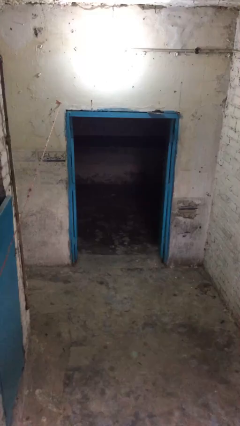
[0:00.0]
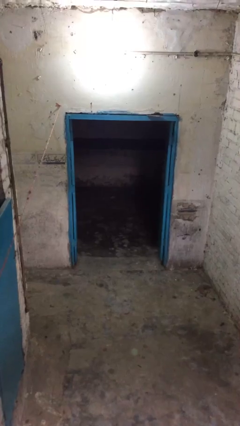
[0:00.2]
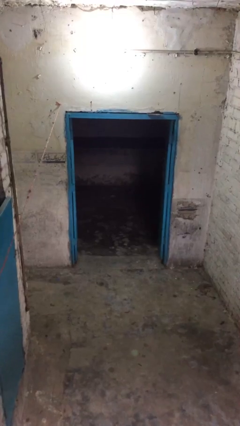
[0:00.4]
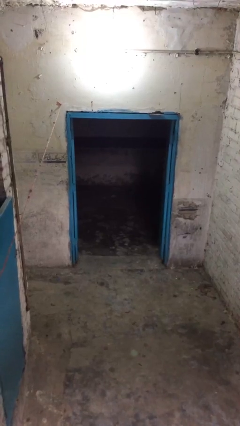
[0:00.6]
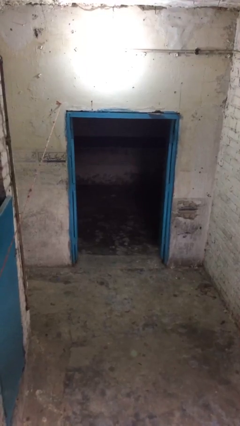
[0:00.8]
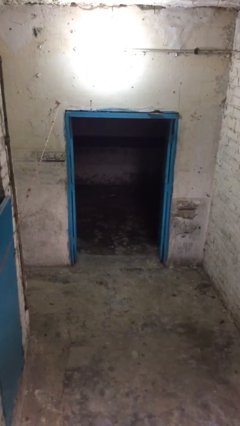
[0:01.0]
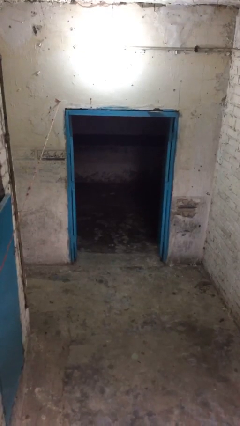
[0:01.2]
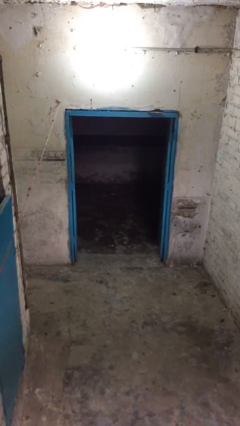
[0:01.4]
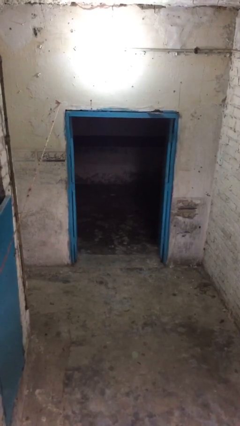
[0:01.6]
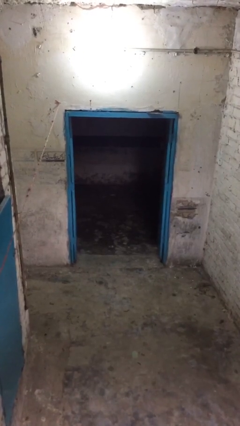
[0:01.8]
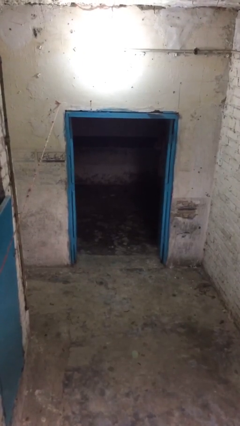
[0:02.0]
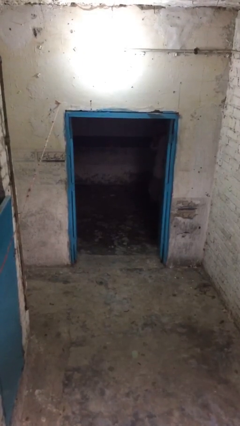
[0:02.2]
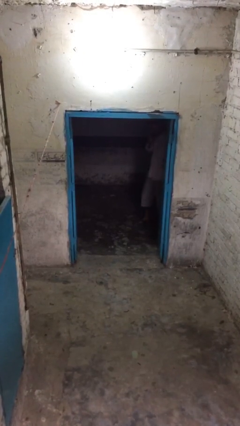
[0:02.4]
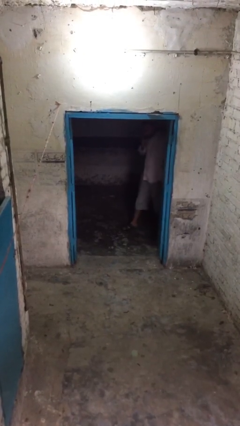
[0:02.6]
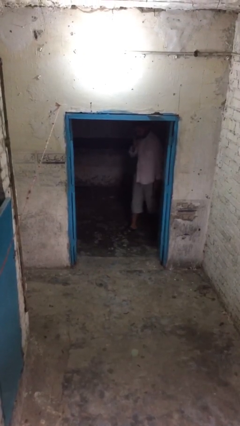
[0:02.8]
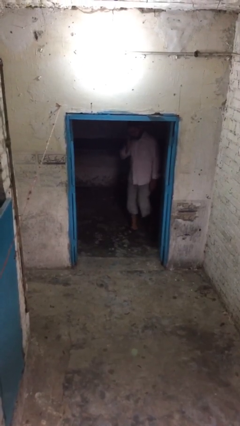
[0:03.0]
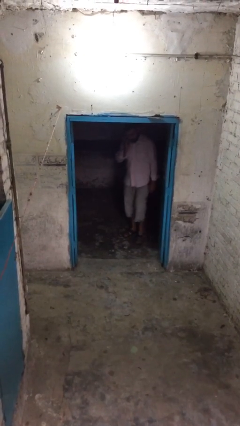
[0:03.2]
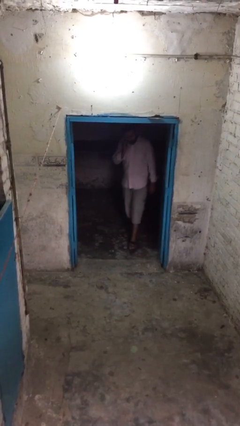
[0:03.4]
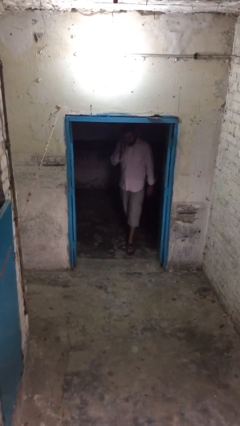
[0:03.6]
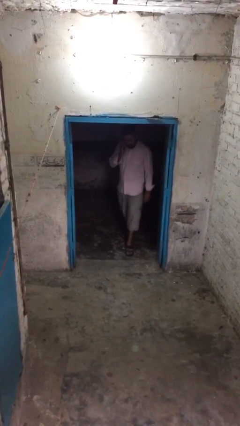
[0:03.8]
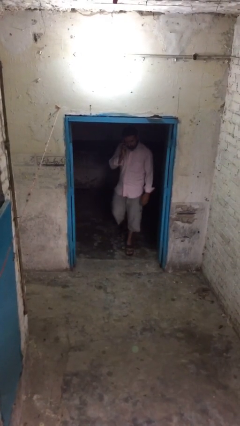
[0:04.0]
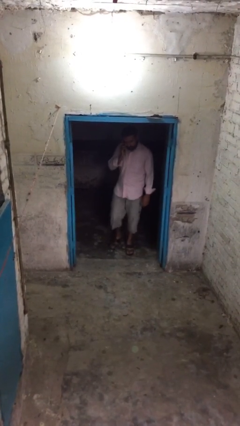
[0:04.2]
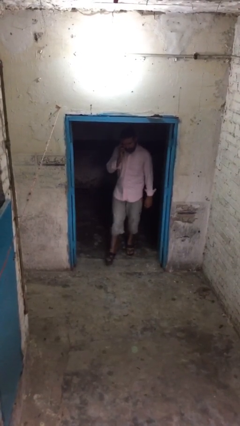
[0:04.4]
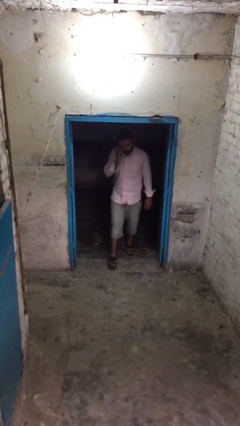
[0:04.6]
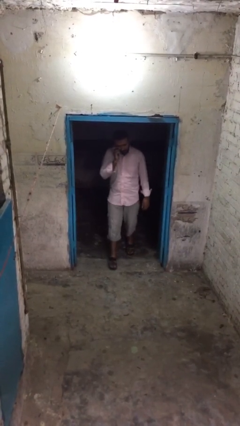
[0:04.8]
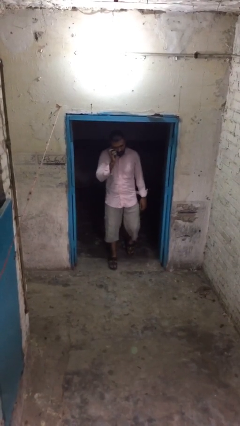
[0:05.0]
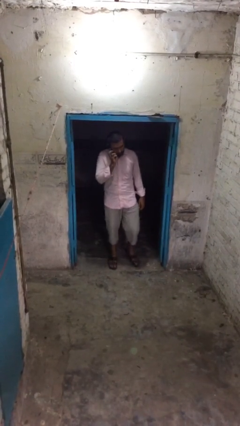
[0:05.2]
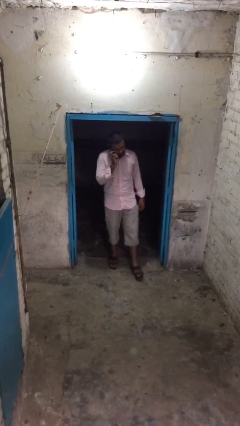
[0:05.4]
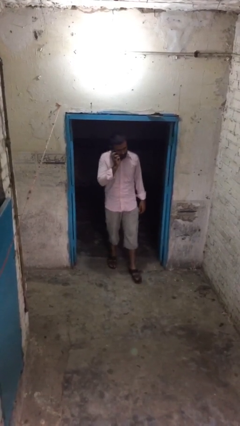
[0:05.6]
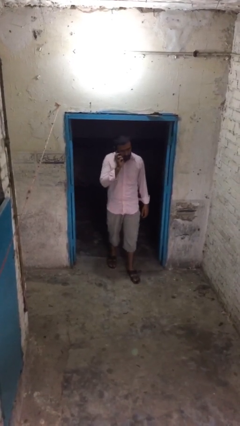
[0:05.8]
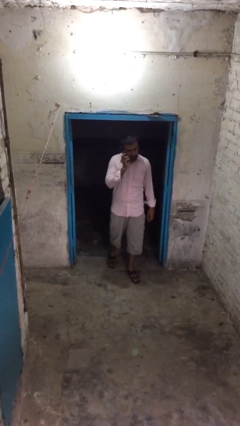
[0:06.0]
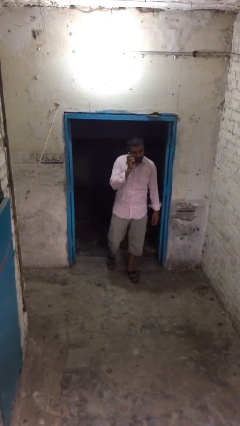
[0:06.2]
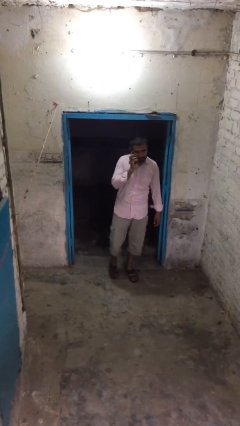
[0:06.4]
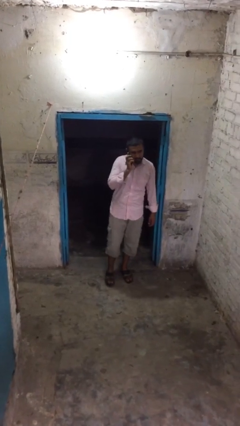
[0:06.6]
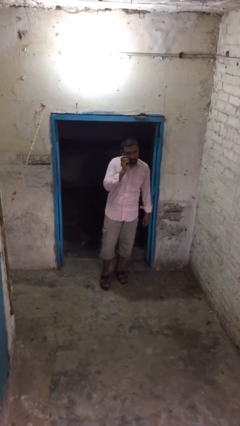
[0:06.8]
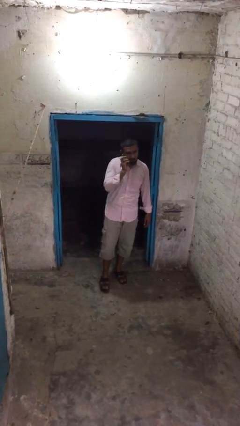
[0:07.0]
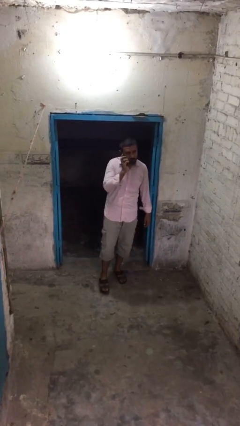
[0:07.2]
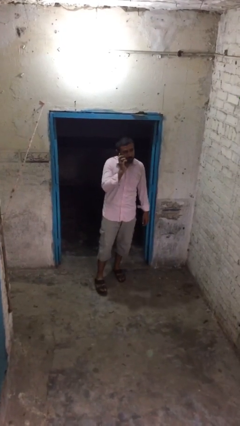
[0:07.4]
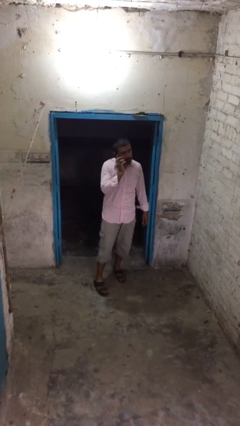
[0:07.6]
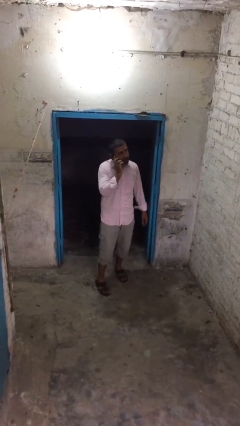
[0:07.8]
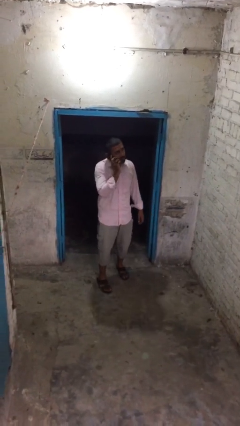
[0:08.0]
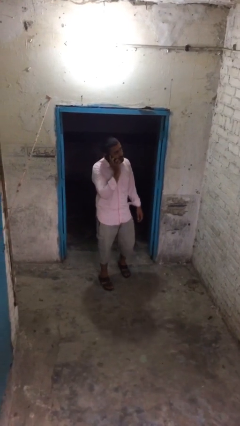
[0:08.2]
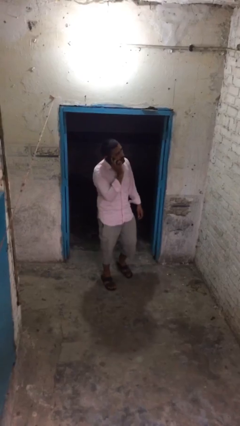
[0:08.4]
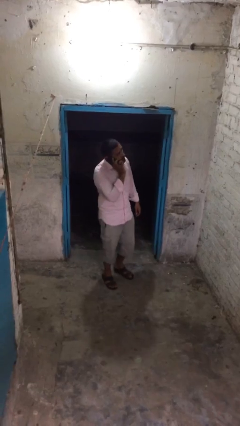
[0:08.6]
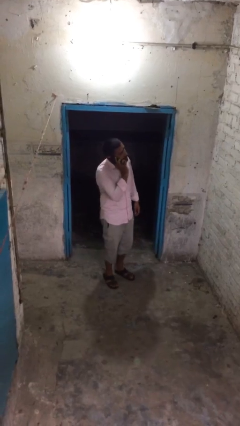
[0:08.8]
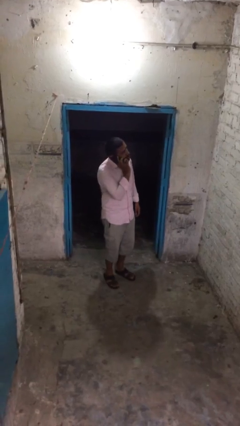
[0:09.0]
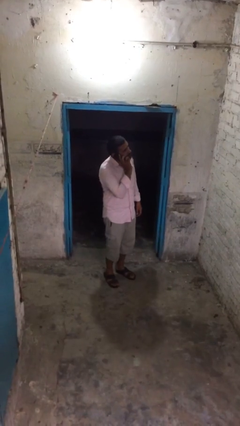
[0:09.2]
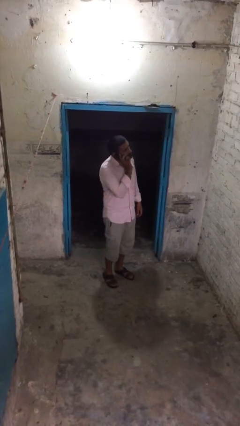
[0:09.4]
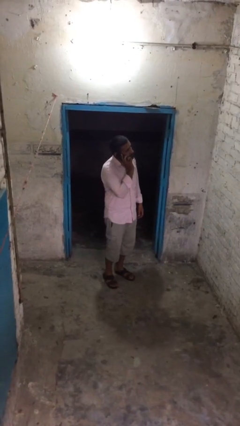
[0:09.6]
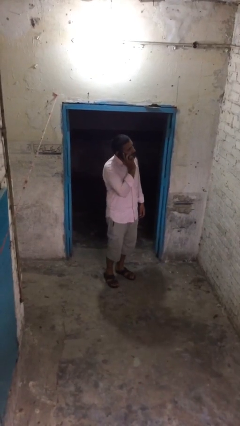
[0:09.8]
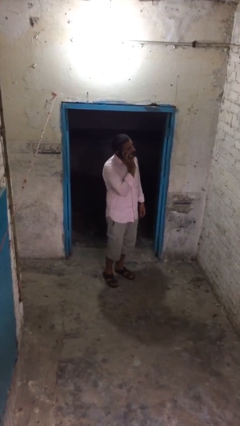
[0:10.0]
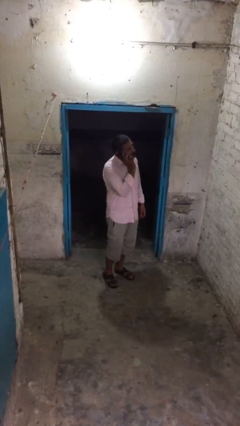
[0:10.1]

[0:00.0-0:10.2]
person enters scene through structure

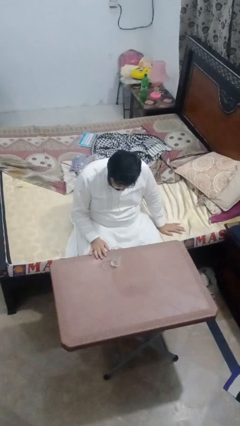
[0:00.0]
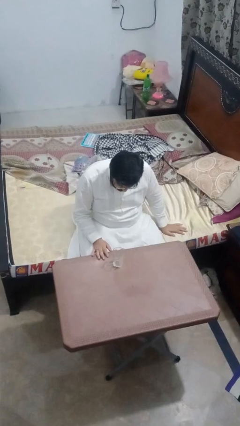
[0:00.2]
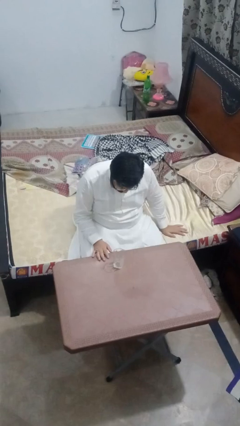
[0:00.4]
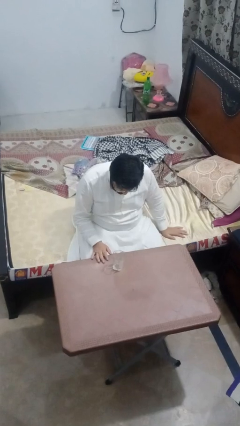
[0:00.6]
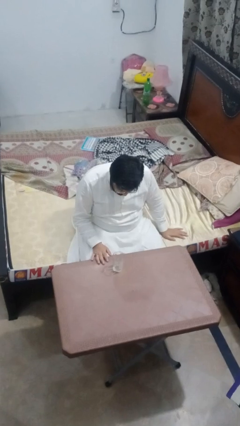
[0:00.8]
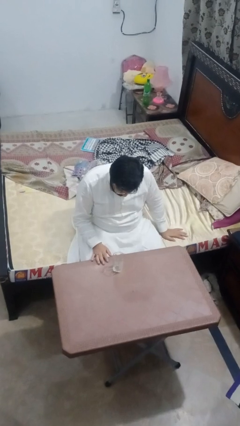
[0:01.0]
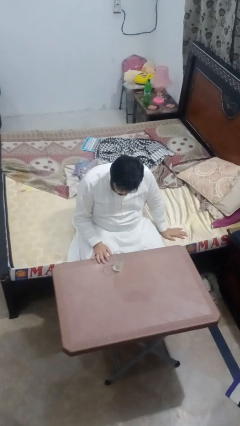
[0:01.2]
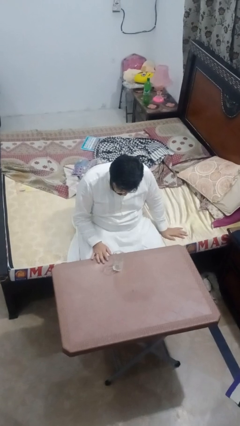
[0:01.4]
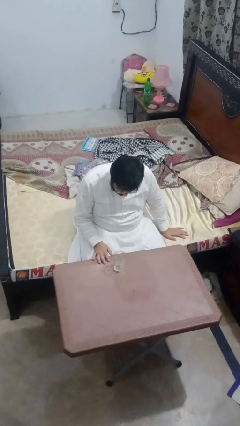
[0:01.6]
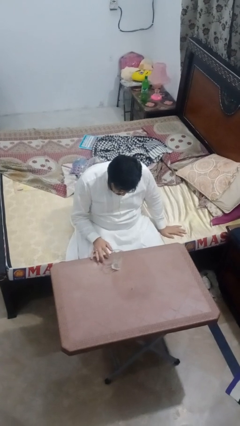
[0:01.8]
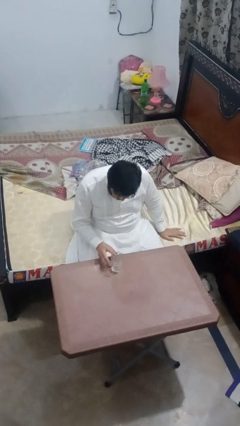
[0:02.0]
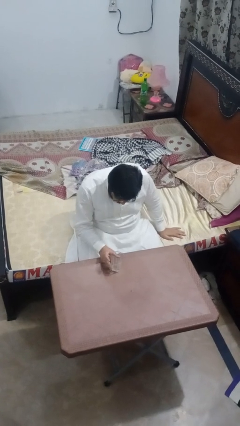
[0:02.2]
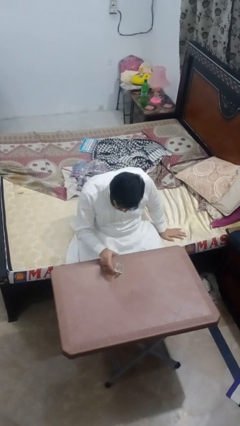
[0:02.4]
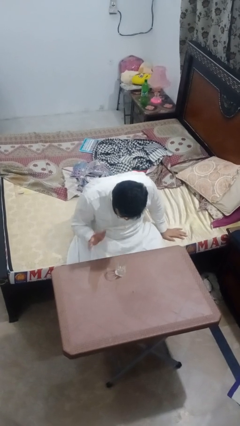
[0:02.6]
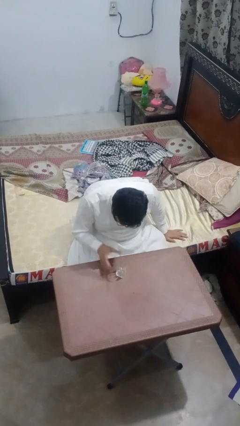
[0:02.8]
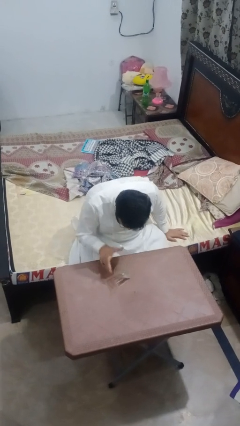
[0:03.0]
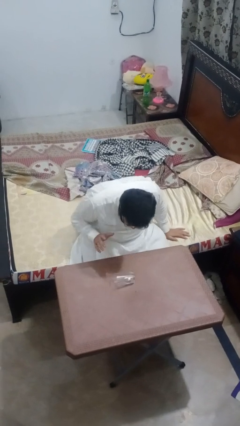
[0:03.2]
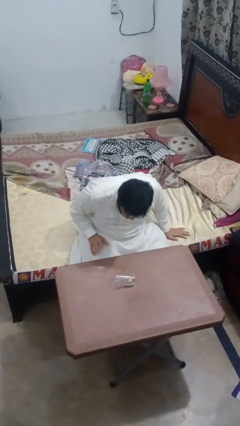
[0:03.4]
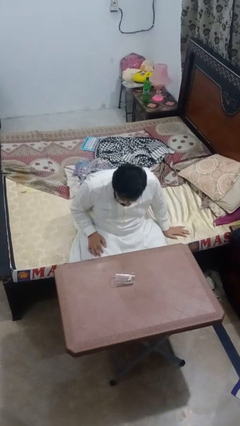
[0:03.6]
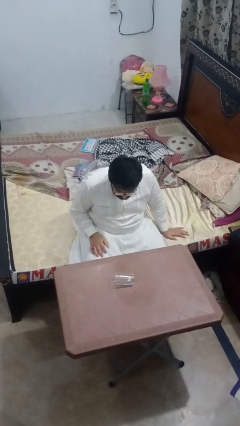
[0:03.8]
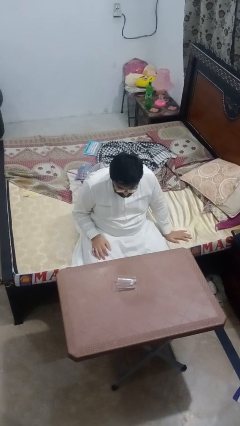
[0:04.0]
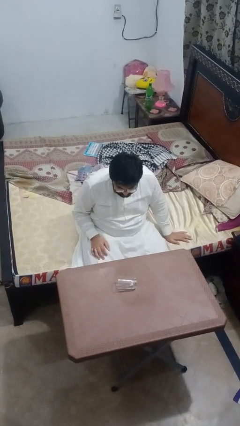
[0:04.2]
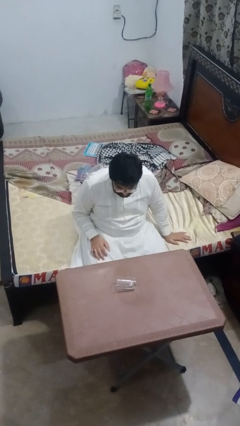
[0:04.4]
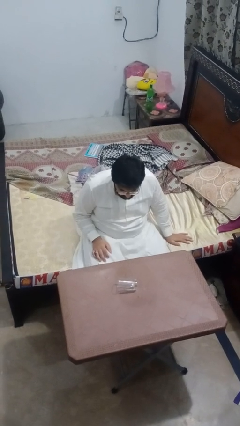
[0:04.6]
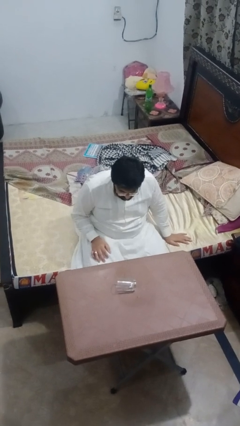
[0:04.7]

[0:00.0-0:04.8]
person knocks over glass

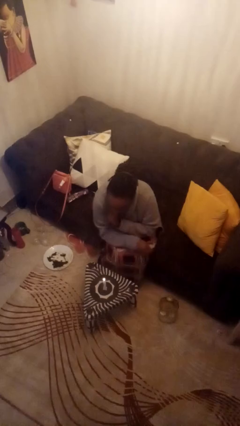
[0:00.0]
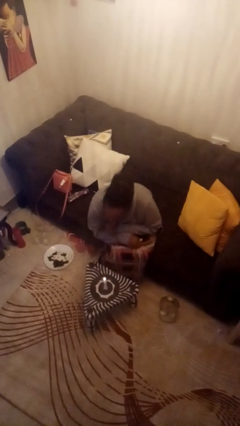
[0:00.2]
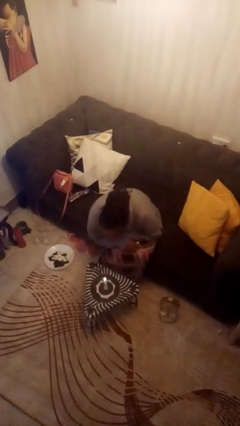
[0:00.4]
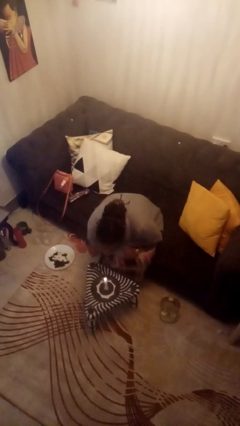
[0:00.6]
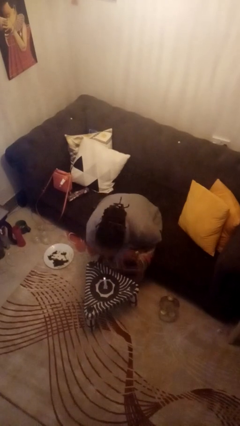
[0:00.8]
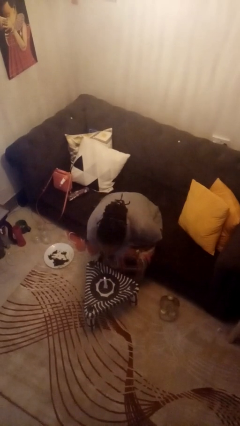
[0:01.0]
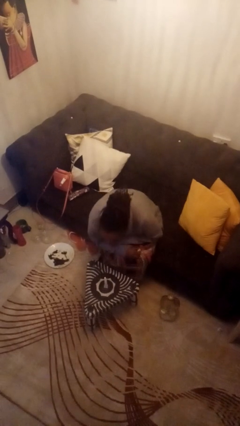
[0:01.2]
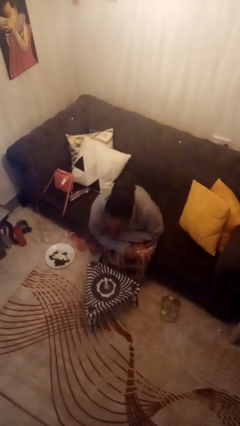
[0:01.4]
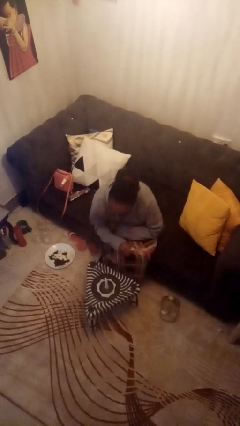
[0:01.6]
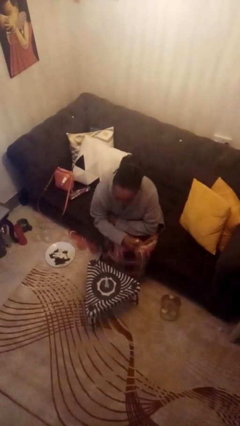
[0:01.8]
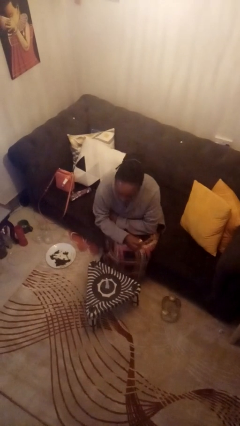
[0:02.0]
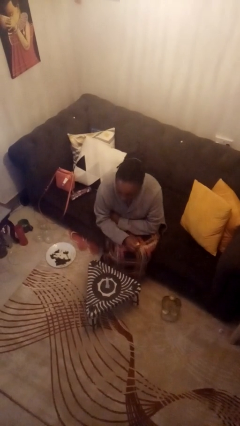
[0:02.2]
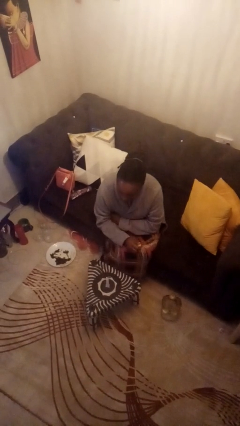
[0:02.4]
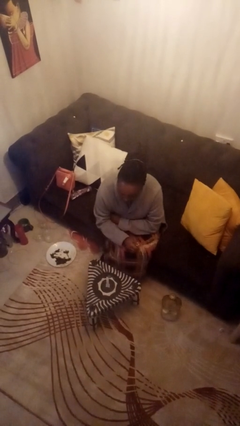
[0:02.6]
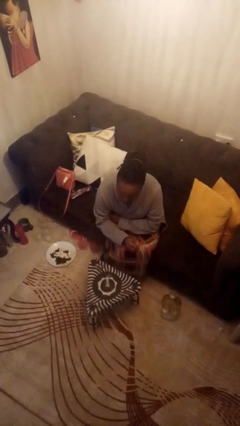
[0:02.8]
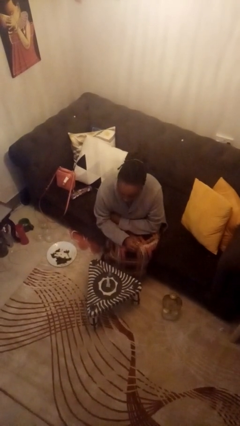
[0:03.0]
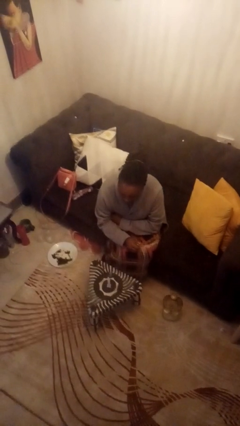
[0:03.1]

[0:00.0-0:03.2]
person extinguishes candle
